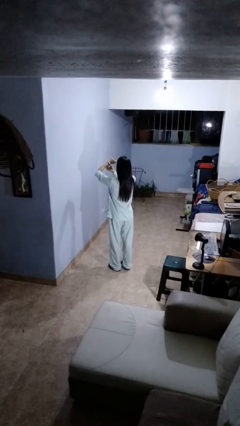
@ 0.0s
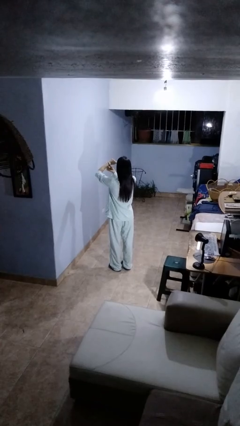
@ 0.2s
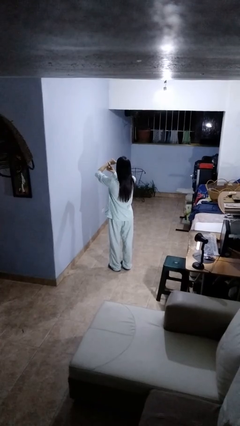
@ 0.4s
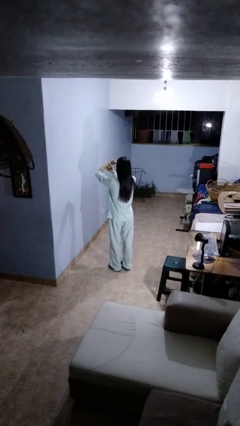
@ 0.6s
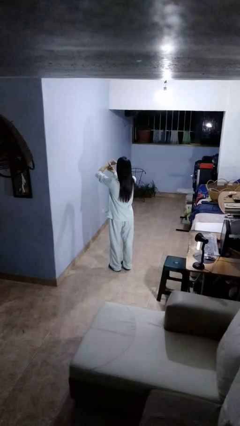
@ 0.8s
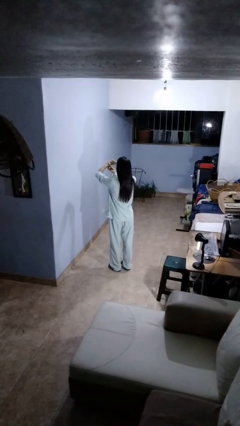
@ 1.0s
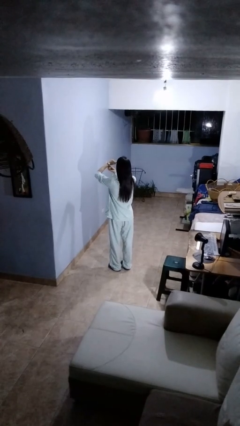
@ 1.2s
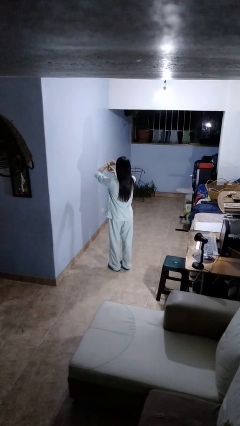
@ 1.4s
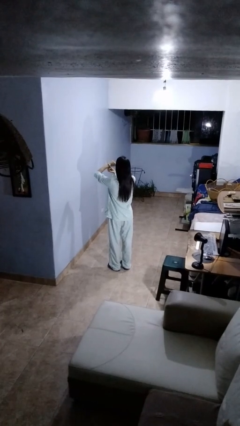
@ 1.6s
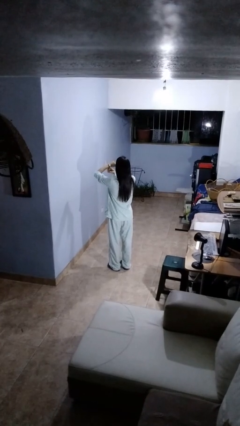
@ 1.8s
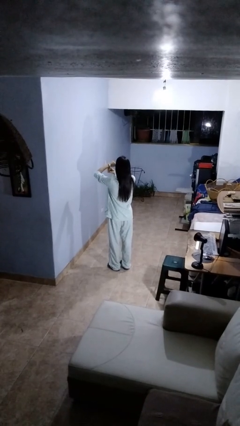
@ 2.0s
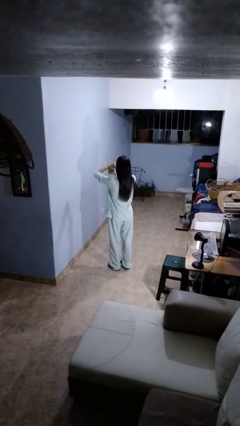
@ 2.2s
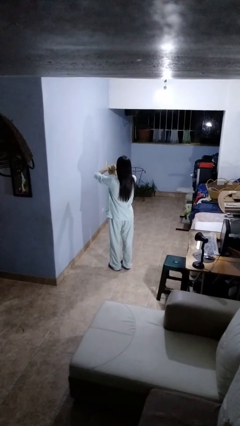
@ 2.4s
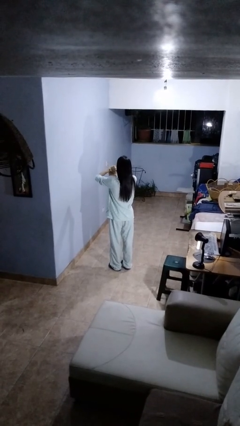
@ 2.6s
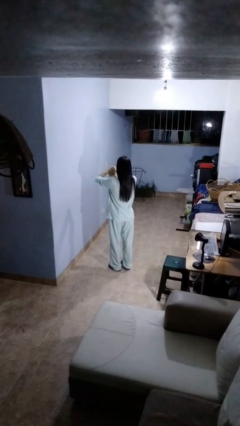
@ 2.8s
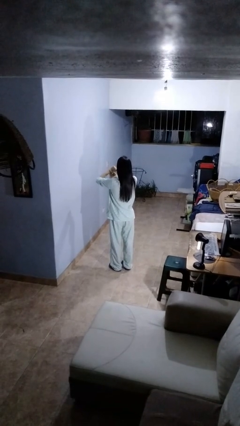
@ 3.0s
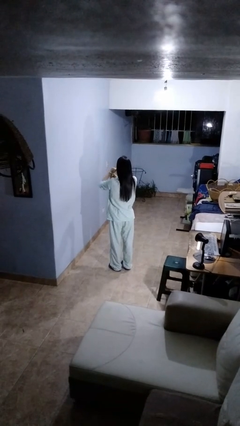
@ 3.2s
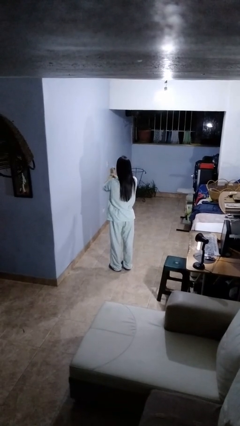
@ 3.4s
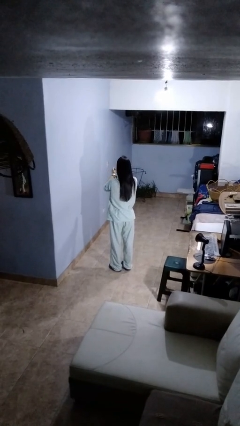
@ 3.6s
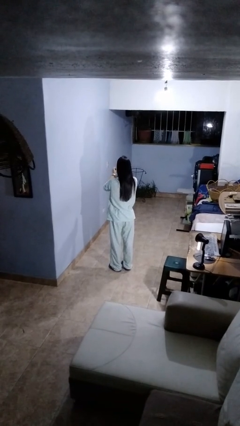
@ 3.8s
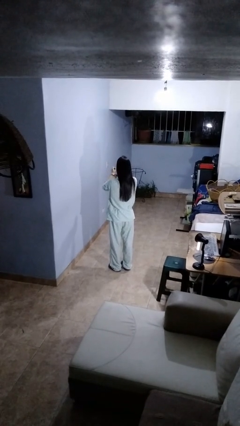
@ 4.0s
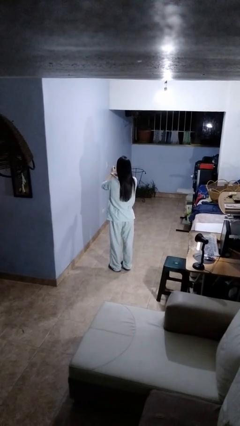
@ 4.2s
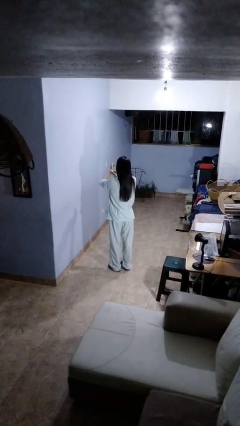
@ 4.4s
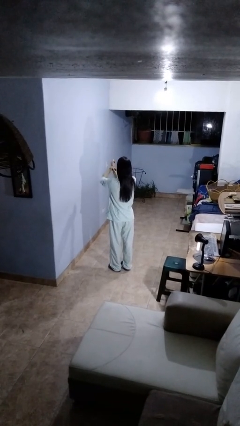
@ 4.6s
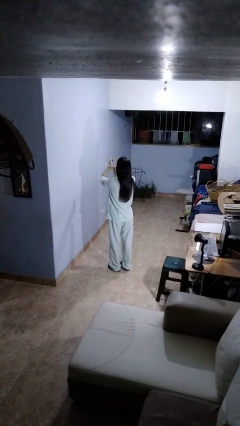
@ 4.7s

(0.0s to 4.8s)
person takes off wristwatch

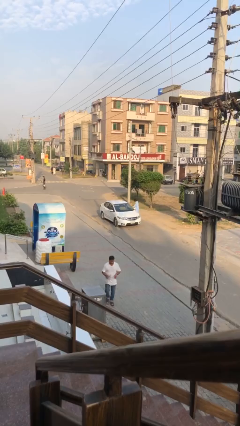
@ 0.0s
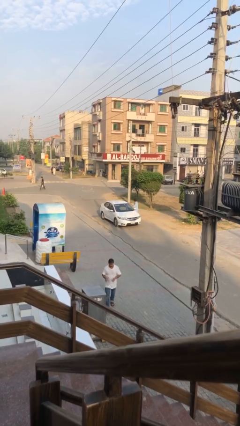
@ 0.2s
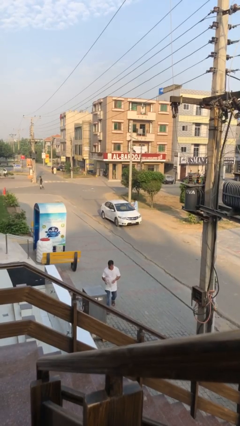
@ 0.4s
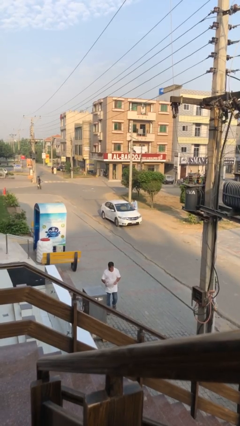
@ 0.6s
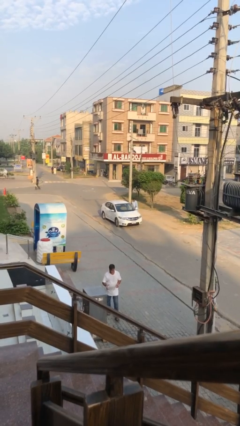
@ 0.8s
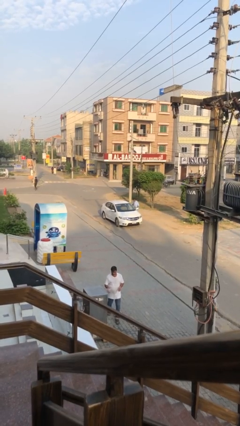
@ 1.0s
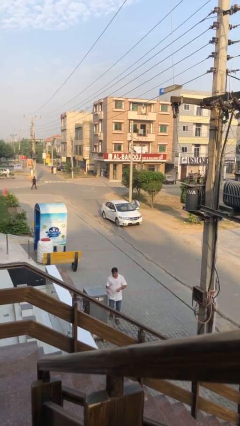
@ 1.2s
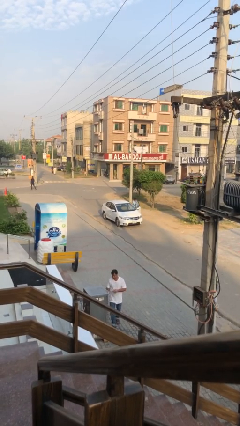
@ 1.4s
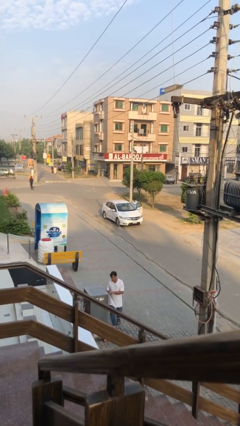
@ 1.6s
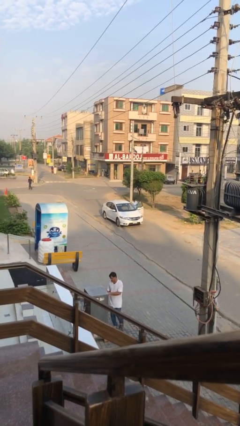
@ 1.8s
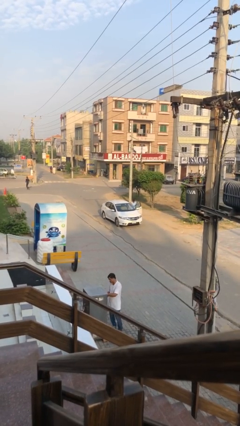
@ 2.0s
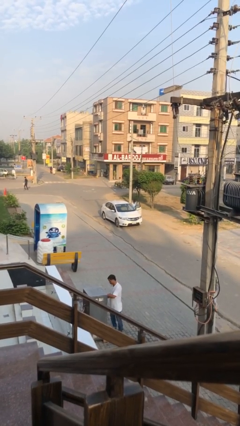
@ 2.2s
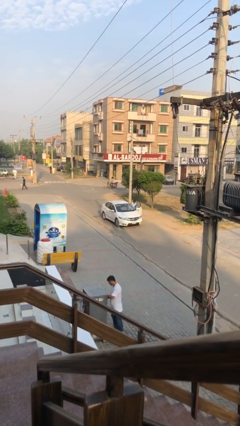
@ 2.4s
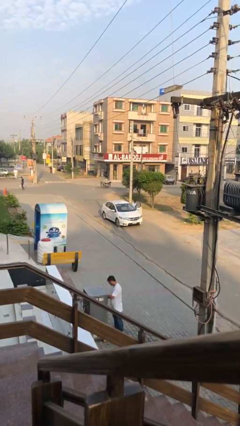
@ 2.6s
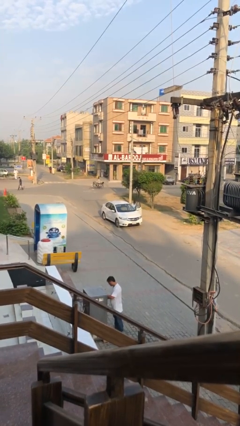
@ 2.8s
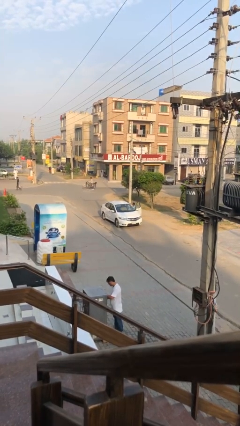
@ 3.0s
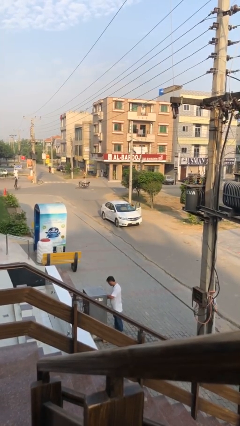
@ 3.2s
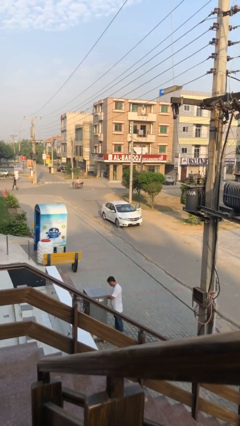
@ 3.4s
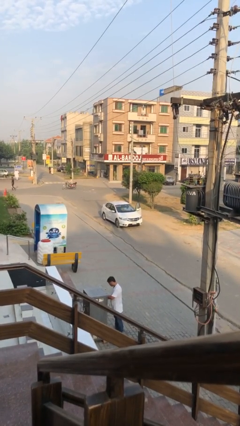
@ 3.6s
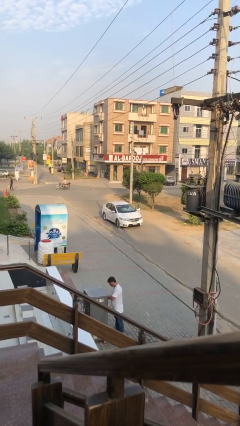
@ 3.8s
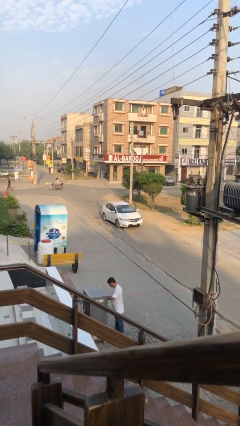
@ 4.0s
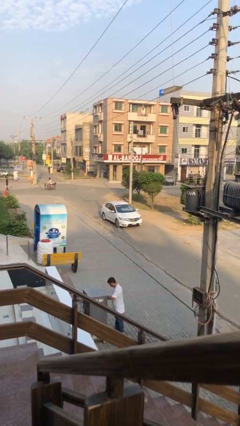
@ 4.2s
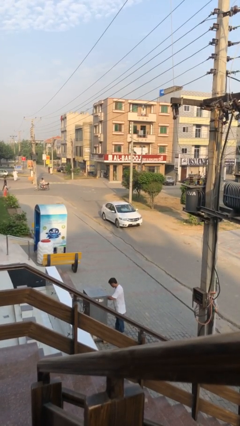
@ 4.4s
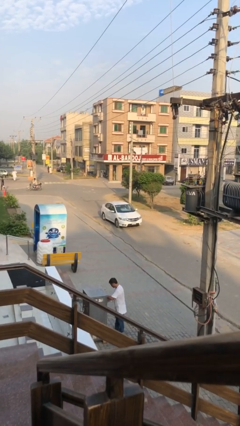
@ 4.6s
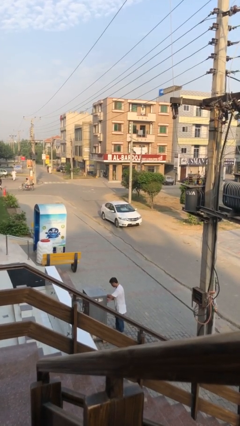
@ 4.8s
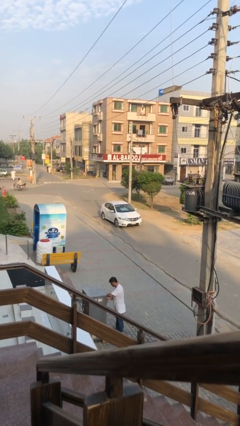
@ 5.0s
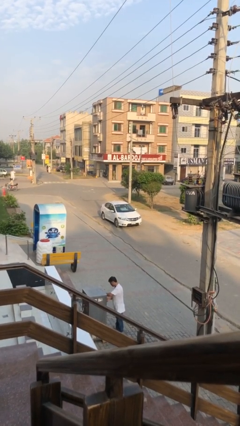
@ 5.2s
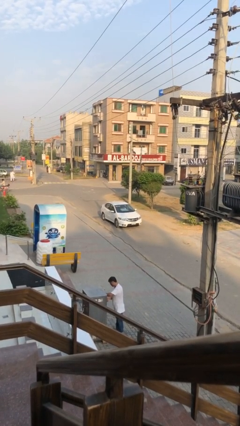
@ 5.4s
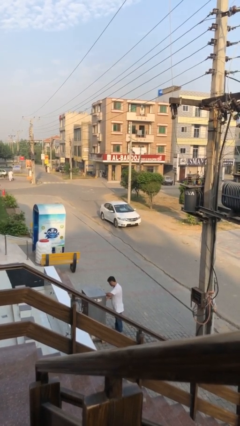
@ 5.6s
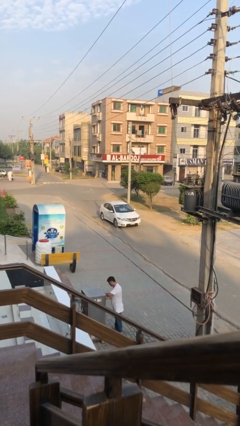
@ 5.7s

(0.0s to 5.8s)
car picks up person

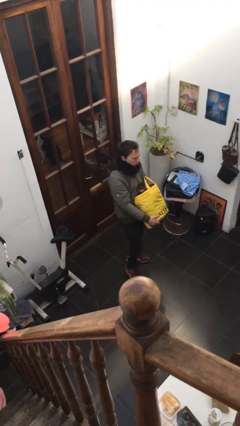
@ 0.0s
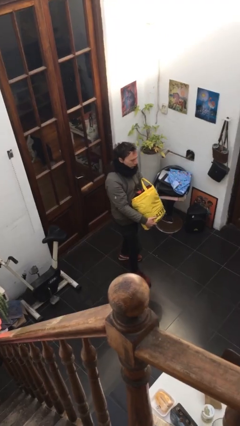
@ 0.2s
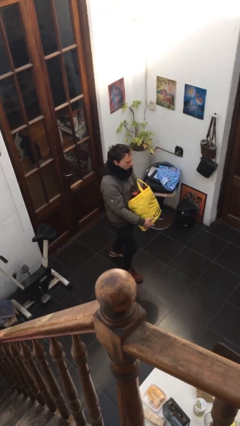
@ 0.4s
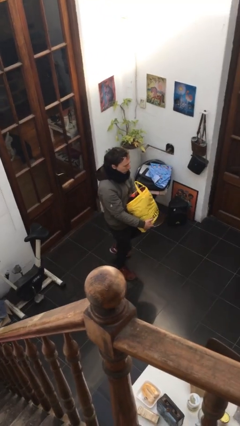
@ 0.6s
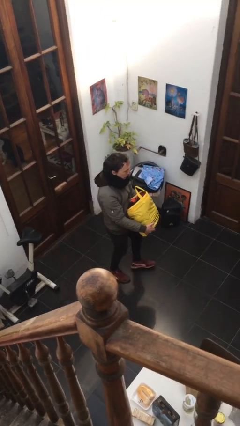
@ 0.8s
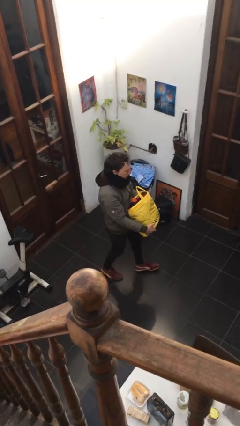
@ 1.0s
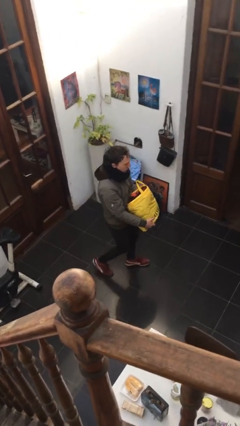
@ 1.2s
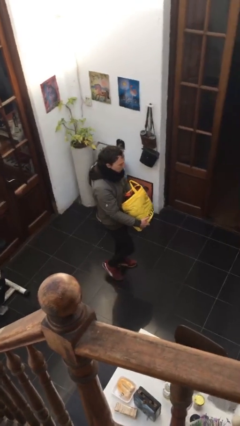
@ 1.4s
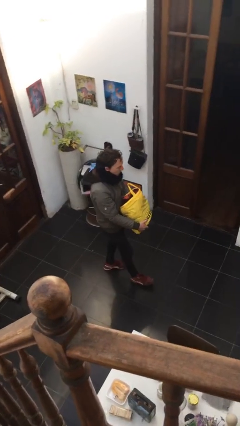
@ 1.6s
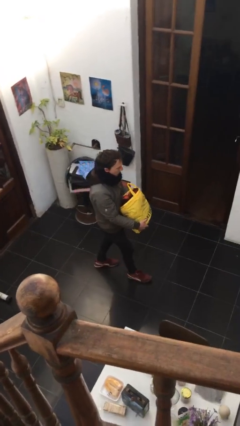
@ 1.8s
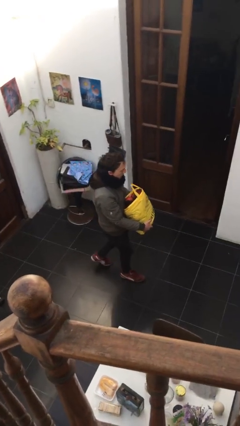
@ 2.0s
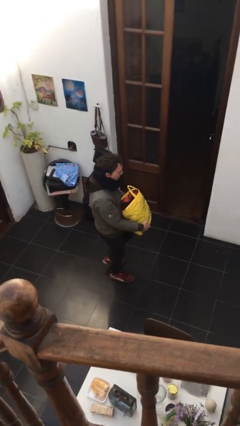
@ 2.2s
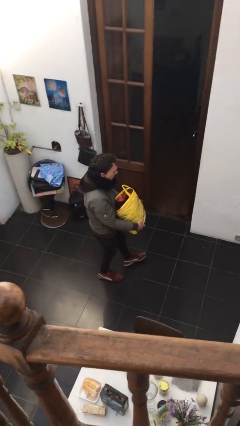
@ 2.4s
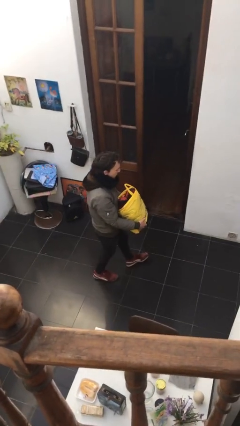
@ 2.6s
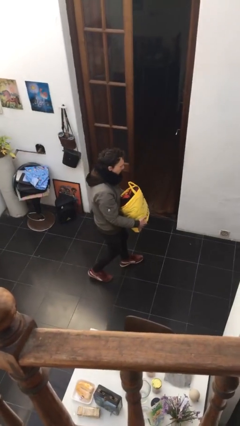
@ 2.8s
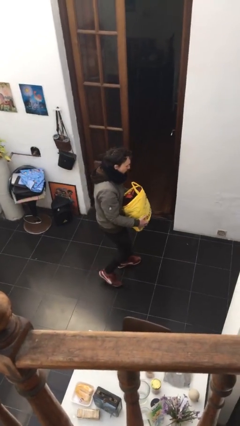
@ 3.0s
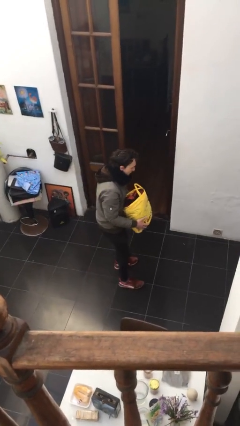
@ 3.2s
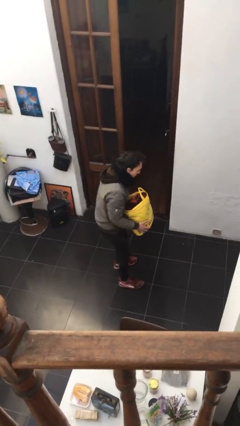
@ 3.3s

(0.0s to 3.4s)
person carries heavy object

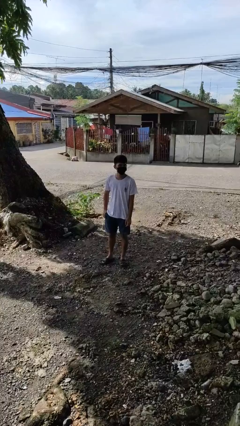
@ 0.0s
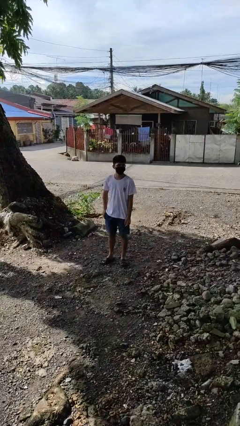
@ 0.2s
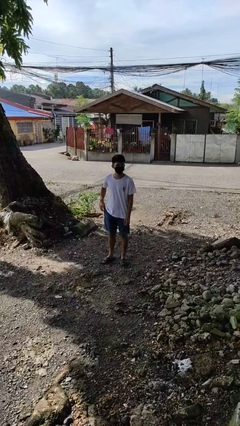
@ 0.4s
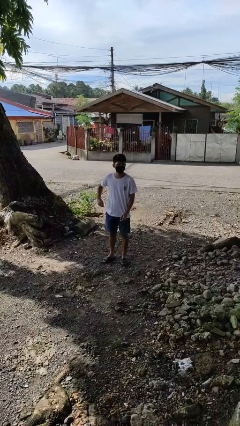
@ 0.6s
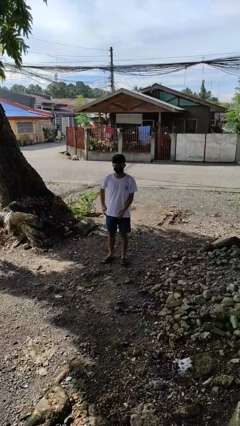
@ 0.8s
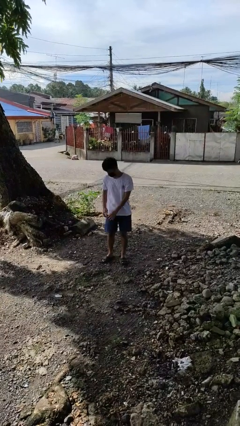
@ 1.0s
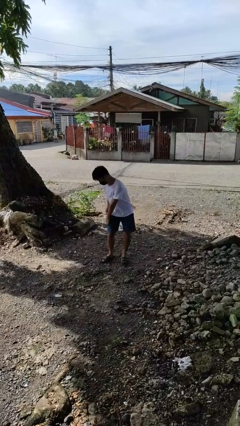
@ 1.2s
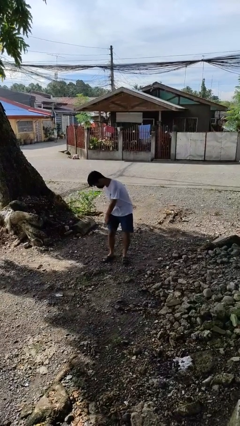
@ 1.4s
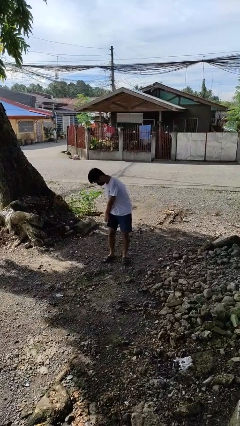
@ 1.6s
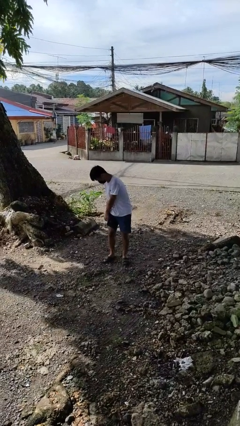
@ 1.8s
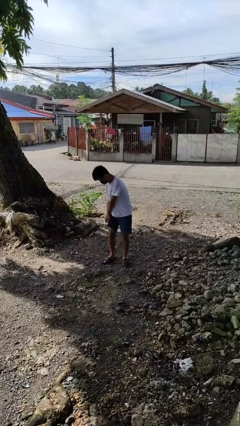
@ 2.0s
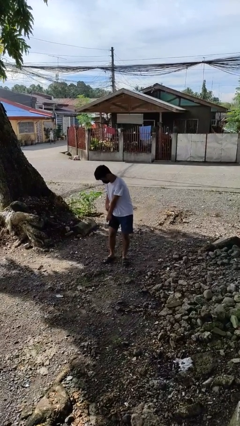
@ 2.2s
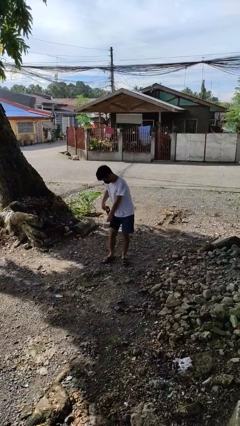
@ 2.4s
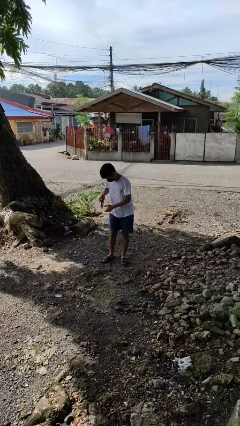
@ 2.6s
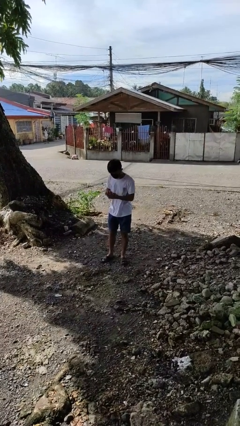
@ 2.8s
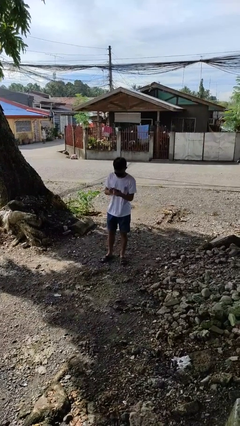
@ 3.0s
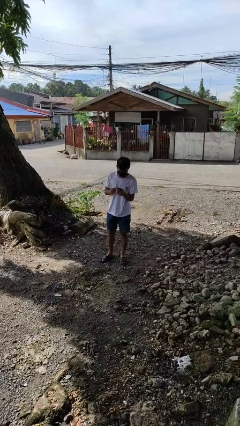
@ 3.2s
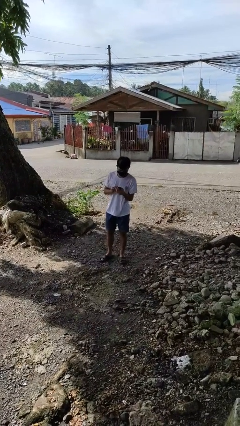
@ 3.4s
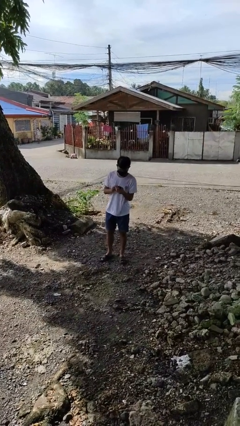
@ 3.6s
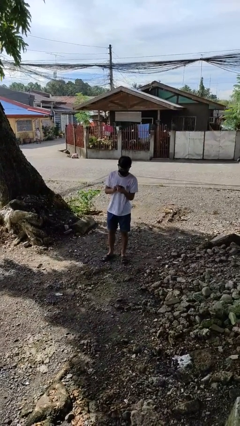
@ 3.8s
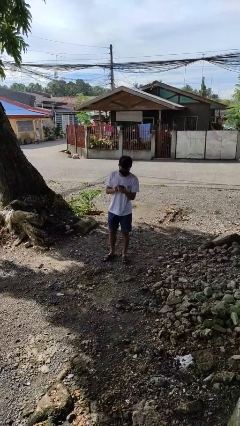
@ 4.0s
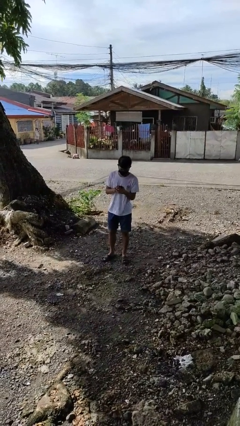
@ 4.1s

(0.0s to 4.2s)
person takes phone from pocket
